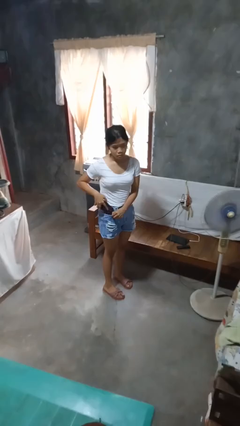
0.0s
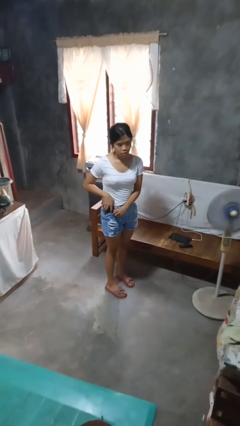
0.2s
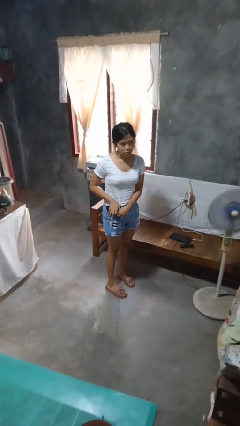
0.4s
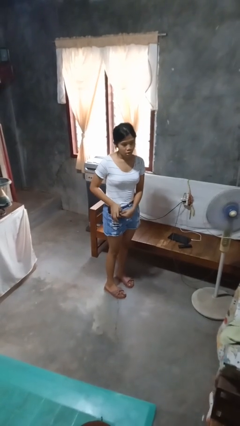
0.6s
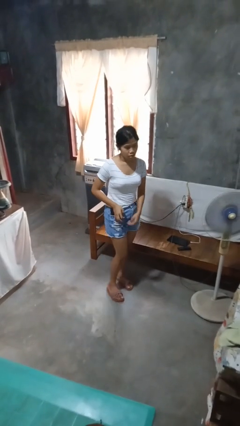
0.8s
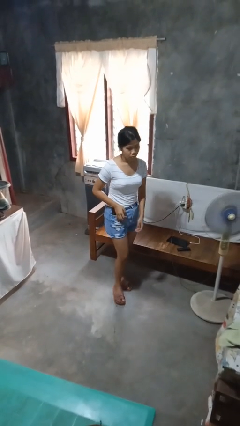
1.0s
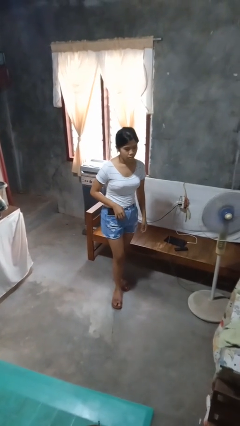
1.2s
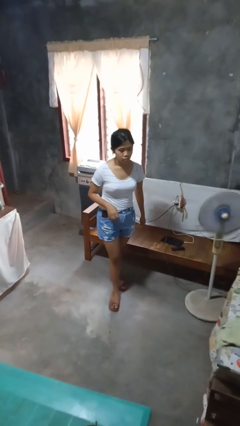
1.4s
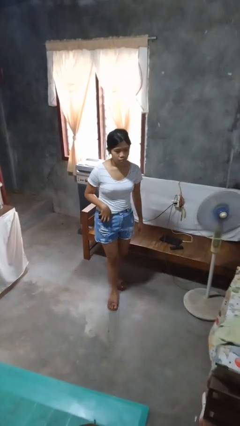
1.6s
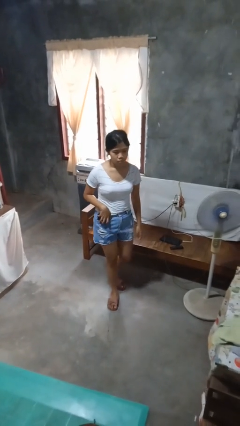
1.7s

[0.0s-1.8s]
person puts phone into pocket

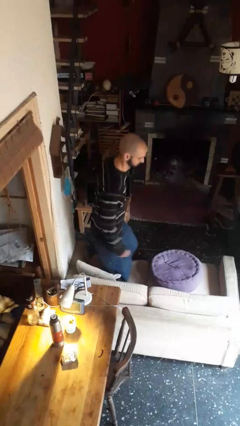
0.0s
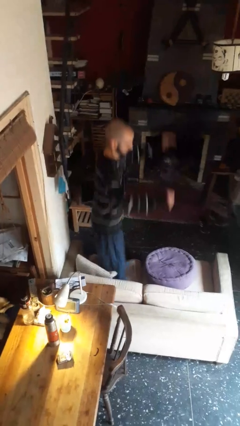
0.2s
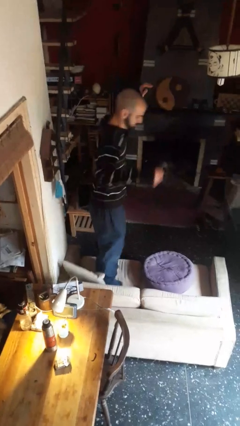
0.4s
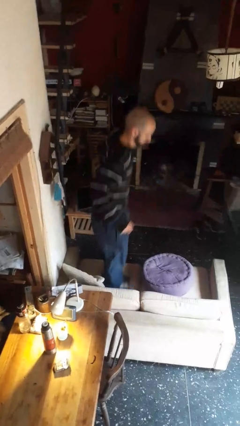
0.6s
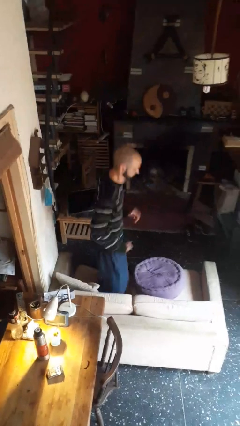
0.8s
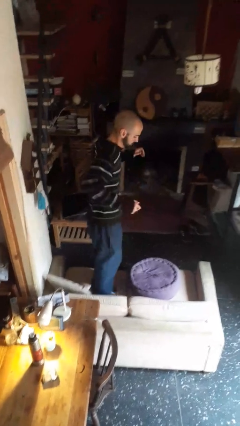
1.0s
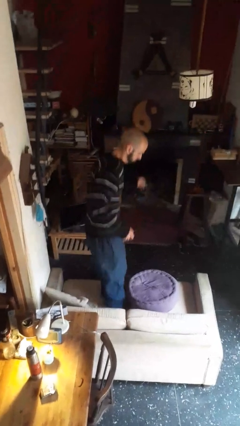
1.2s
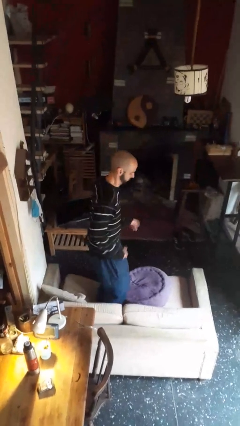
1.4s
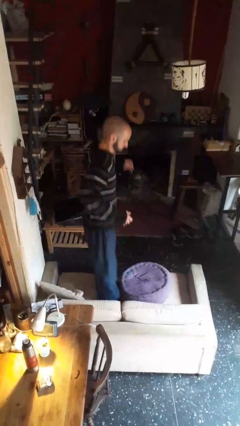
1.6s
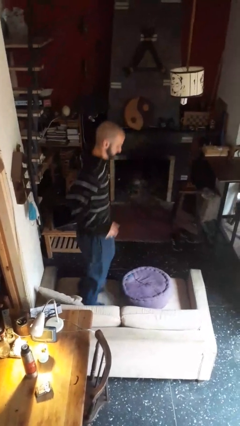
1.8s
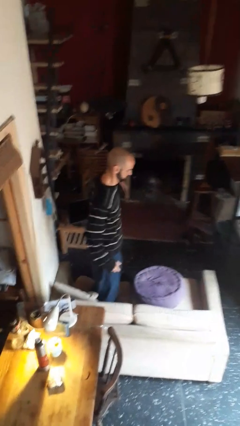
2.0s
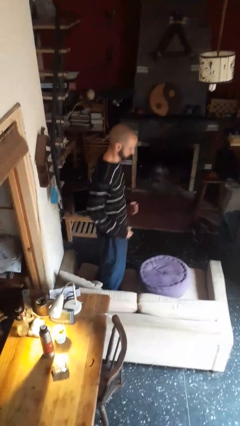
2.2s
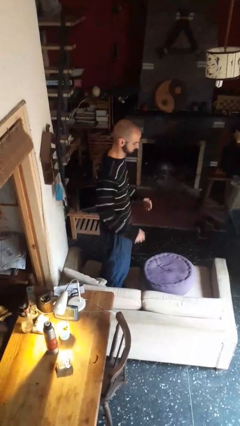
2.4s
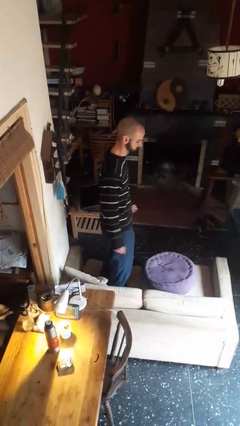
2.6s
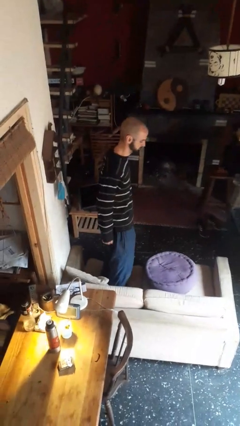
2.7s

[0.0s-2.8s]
person jumps on couch

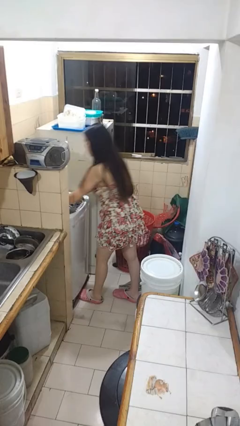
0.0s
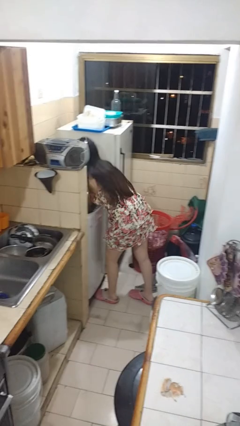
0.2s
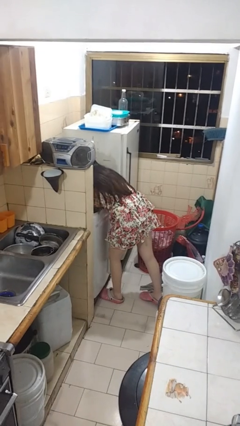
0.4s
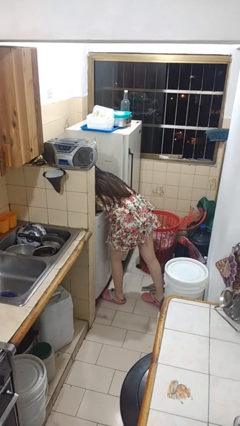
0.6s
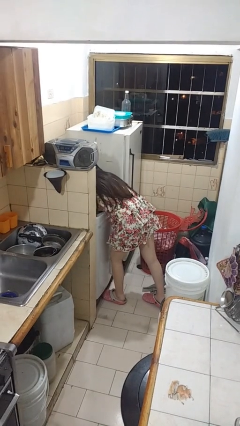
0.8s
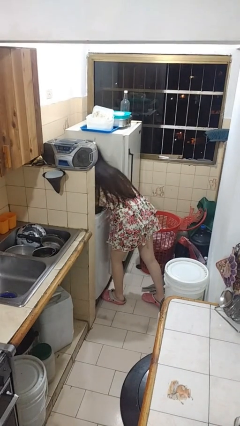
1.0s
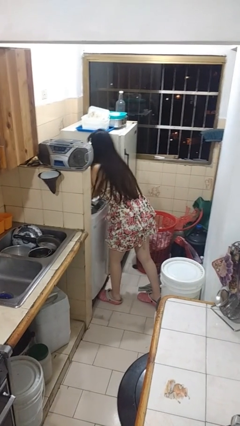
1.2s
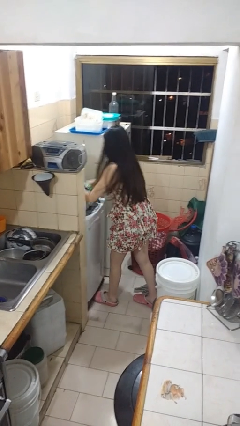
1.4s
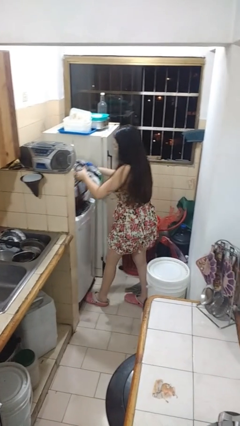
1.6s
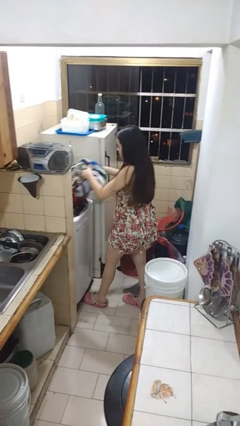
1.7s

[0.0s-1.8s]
person unloads clotheswasher

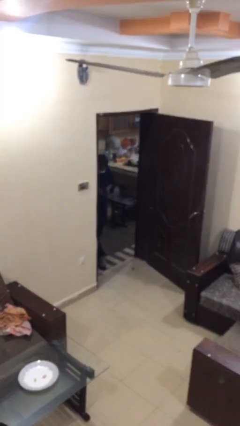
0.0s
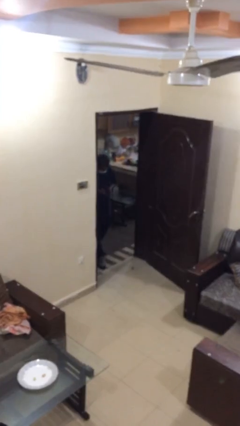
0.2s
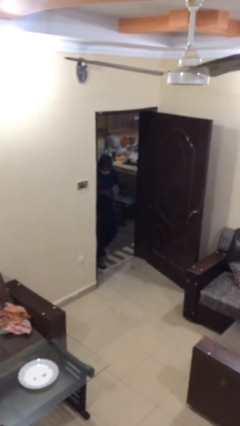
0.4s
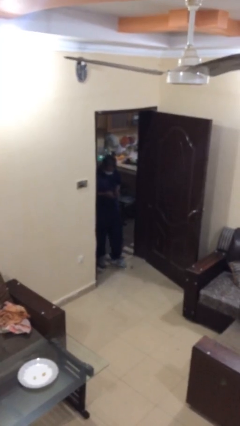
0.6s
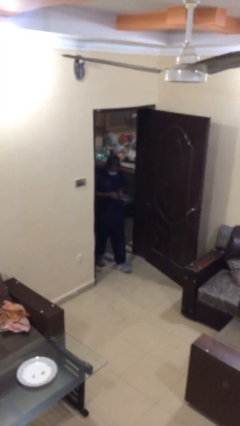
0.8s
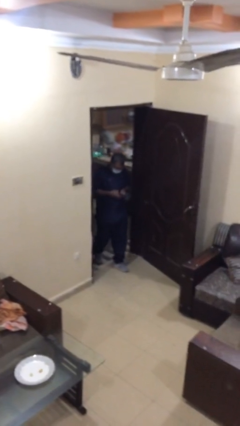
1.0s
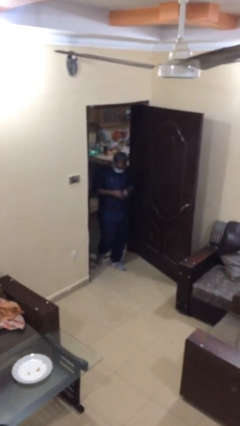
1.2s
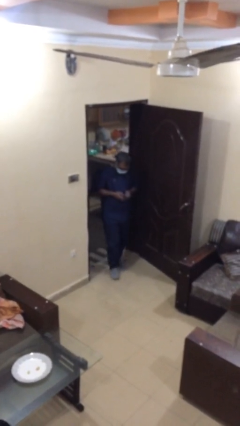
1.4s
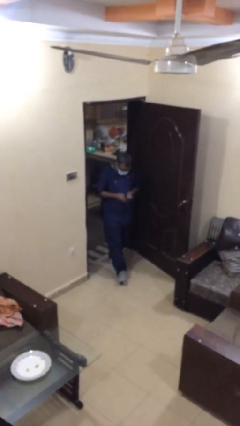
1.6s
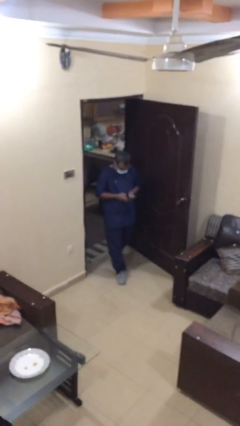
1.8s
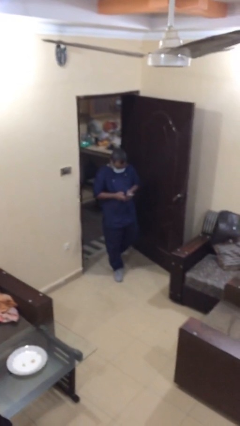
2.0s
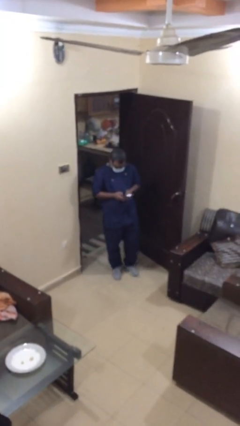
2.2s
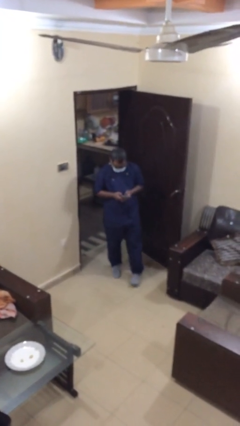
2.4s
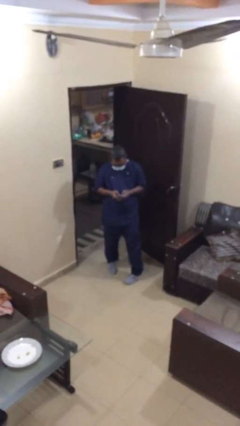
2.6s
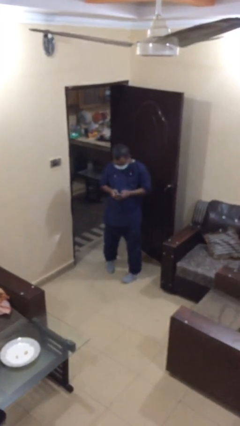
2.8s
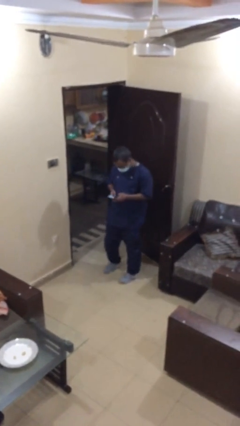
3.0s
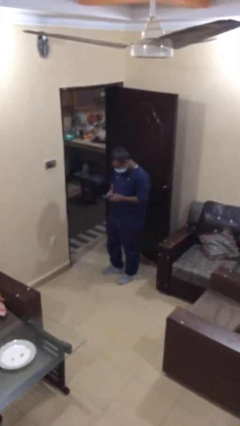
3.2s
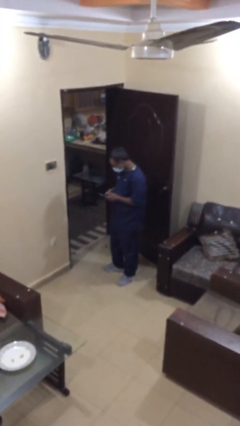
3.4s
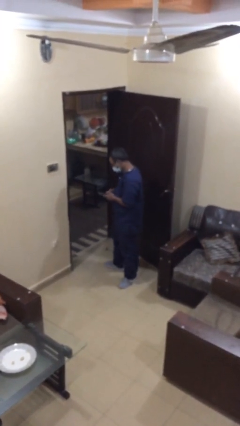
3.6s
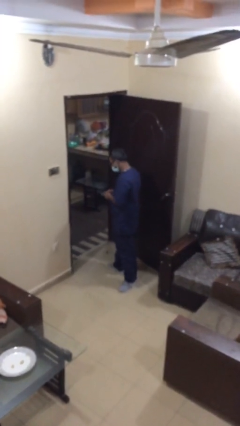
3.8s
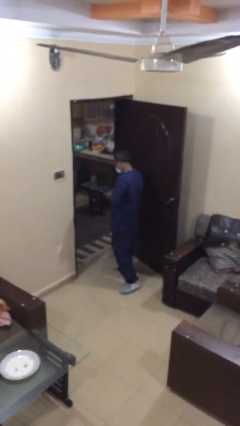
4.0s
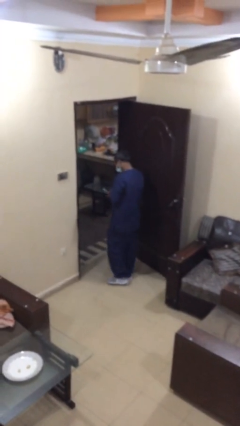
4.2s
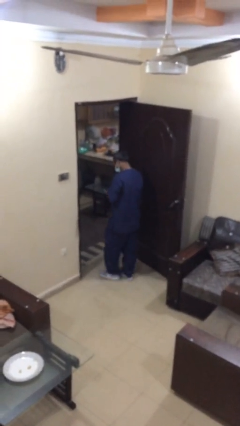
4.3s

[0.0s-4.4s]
person enters scene through structure

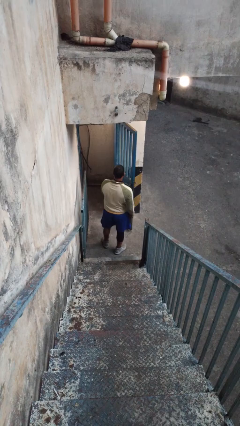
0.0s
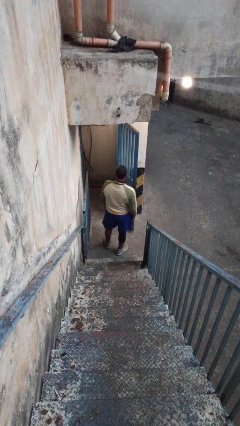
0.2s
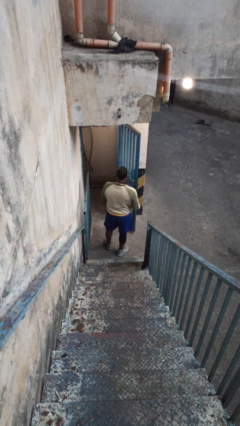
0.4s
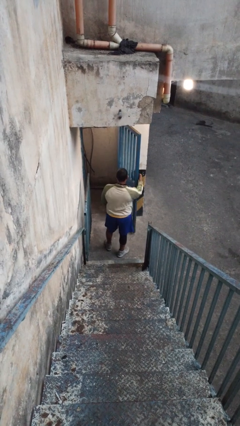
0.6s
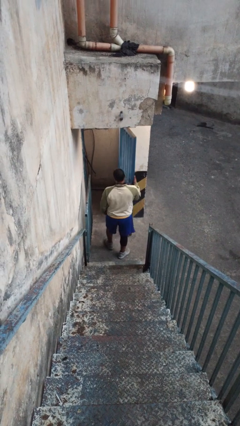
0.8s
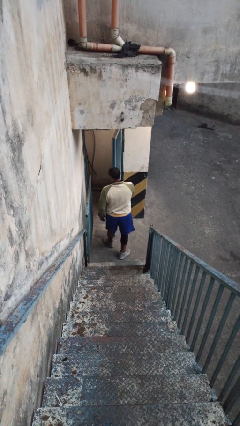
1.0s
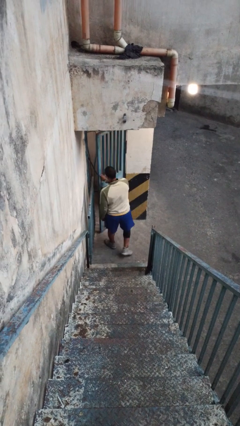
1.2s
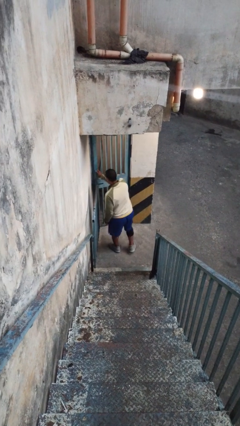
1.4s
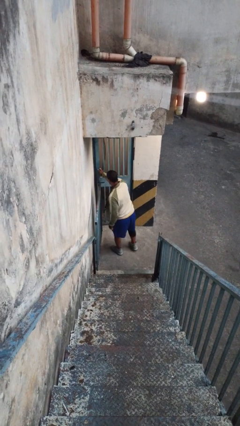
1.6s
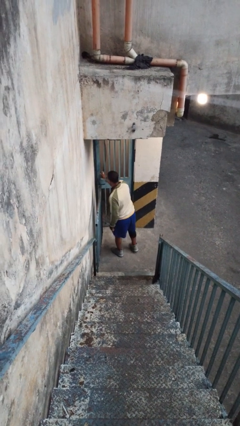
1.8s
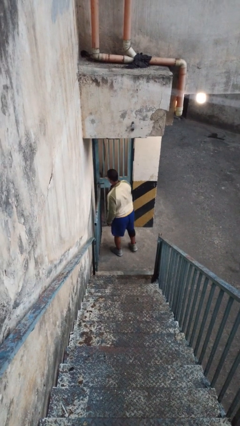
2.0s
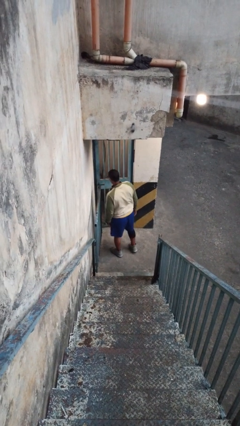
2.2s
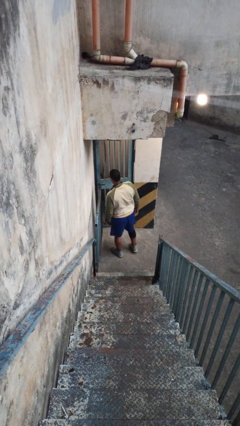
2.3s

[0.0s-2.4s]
person closes facility door

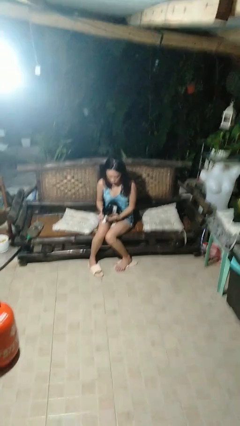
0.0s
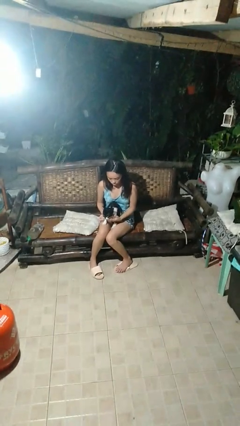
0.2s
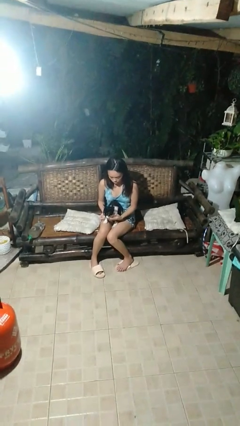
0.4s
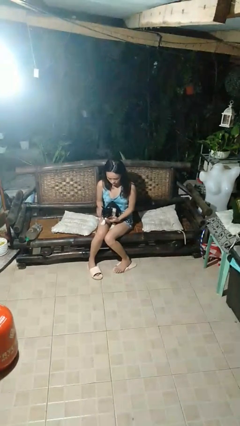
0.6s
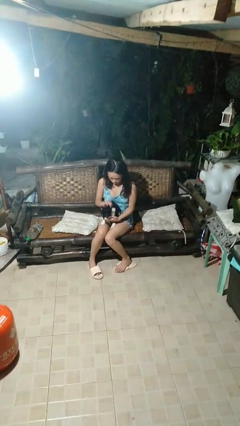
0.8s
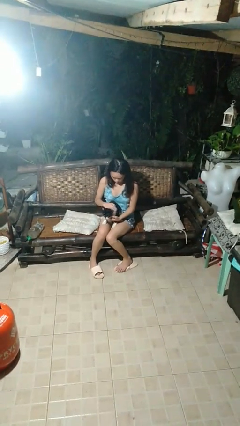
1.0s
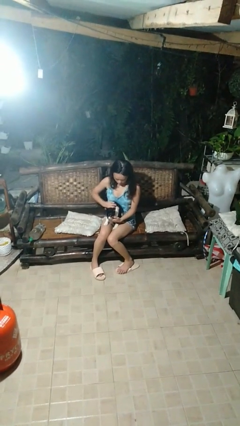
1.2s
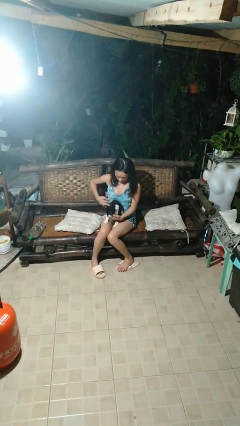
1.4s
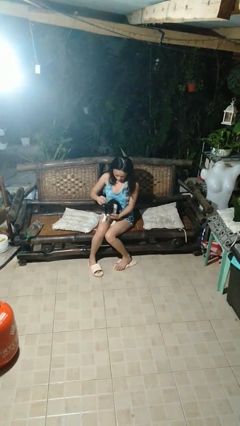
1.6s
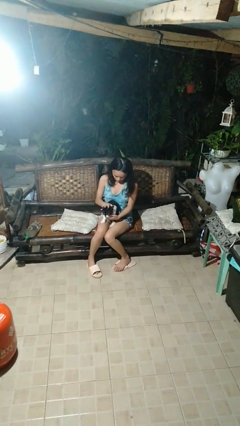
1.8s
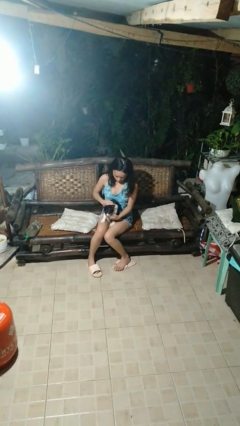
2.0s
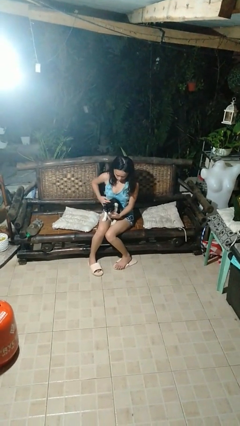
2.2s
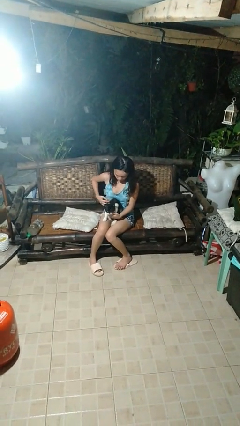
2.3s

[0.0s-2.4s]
person pets cat

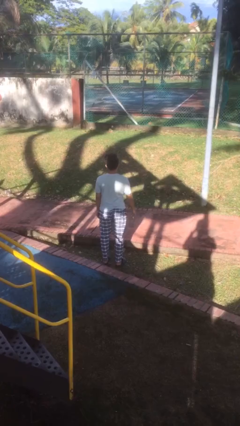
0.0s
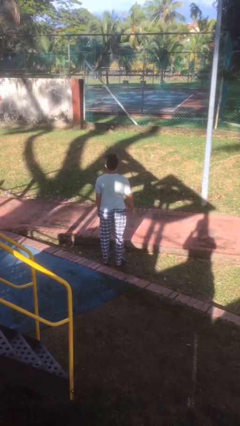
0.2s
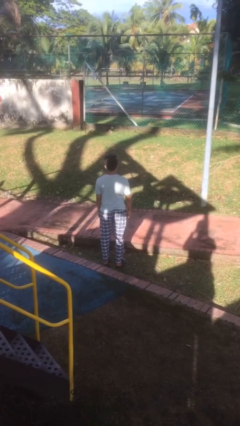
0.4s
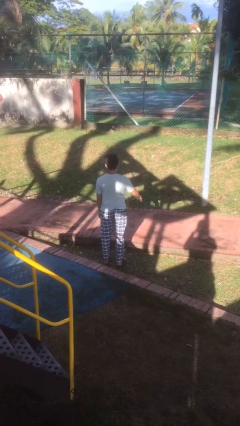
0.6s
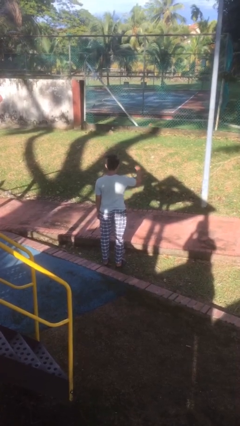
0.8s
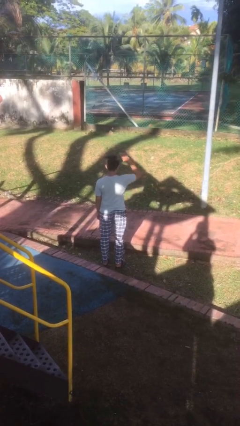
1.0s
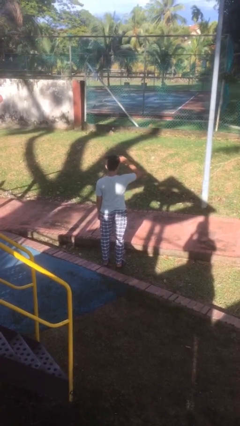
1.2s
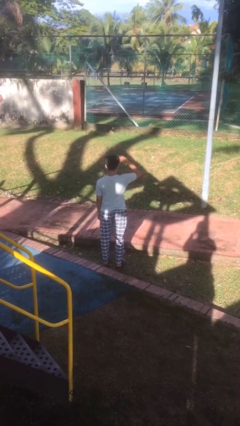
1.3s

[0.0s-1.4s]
person salutes
